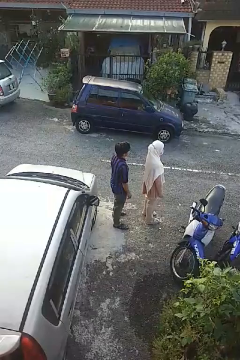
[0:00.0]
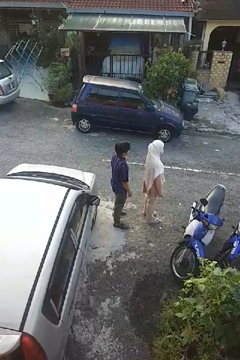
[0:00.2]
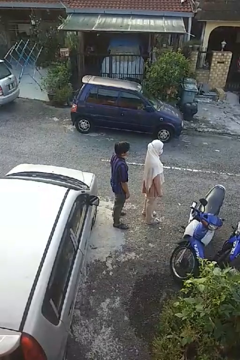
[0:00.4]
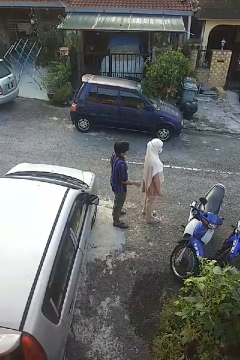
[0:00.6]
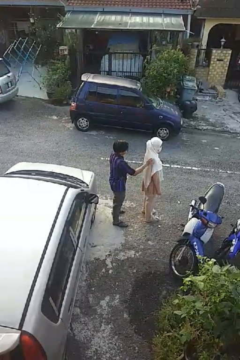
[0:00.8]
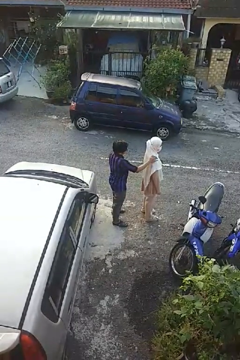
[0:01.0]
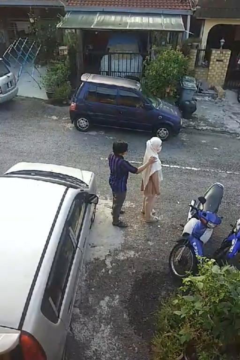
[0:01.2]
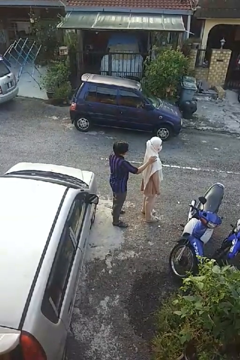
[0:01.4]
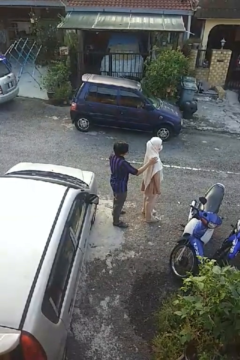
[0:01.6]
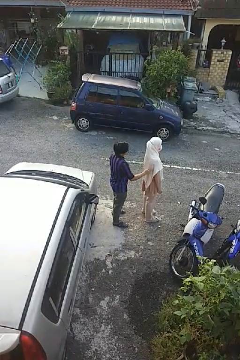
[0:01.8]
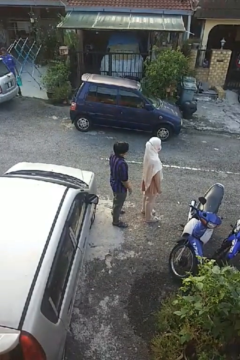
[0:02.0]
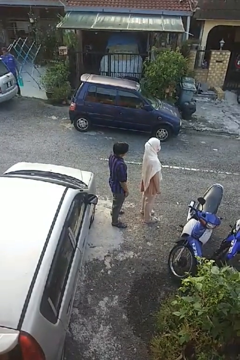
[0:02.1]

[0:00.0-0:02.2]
person touches back of person

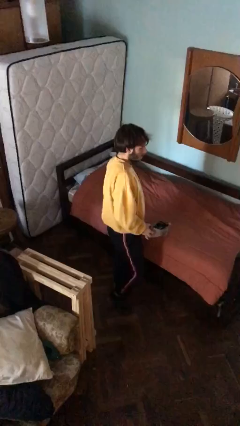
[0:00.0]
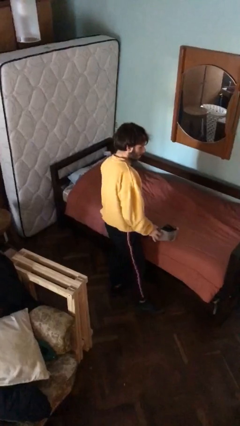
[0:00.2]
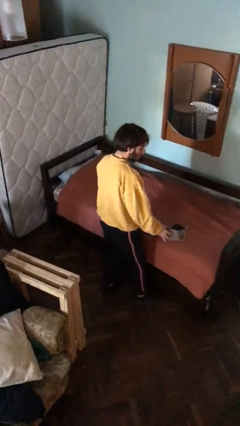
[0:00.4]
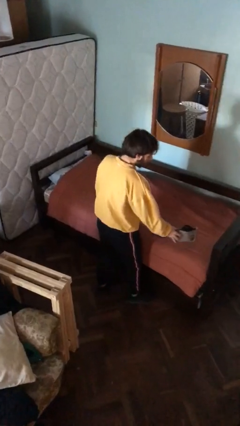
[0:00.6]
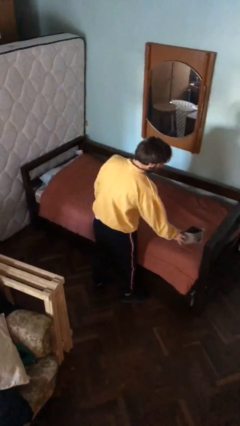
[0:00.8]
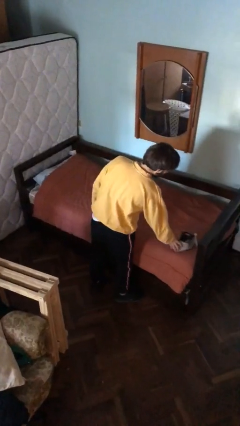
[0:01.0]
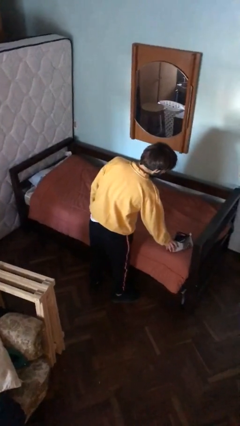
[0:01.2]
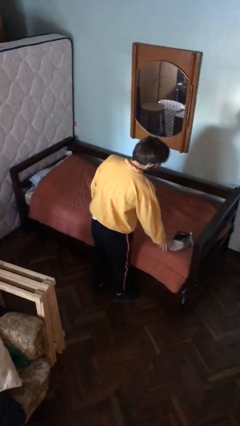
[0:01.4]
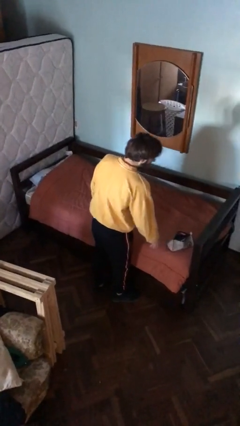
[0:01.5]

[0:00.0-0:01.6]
person puts down object on bed

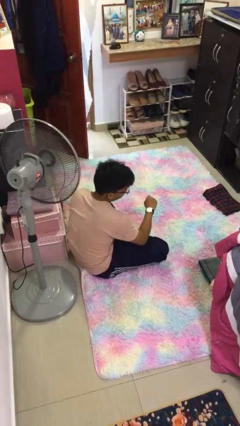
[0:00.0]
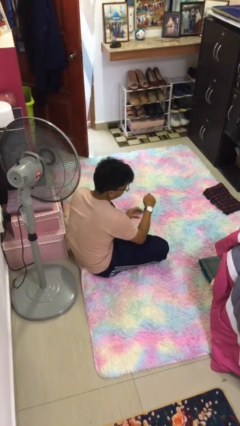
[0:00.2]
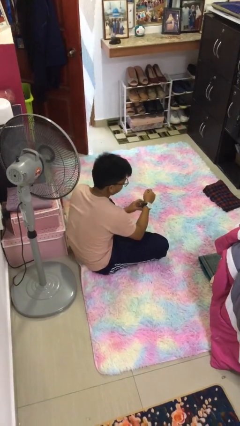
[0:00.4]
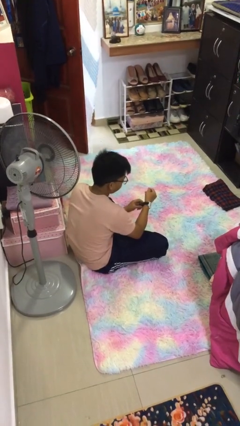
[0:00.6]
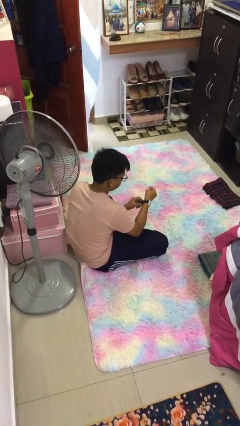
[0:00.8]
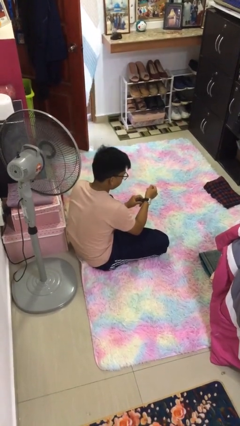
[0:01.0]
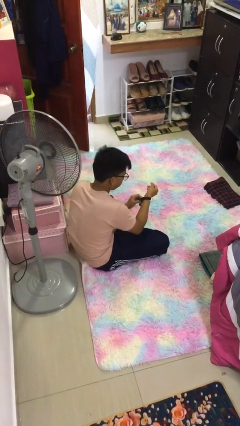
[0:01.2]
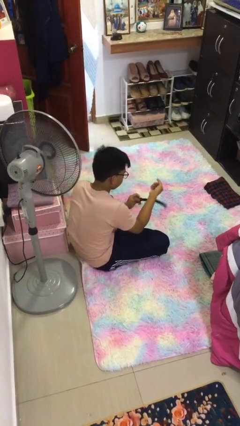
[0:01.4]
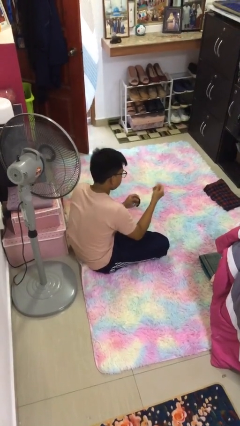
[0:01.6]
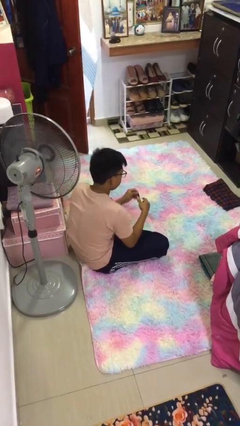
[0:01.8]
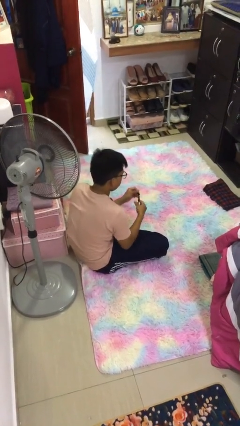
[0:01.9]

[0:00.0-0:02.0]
person takes off wristwatch

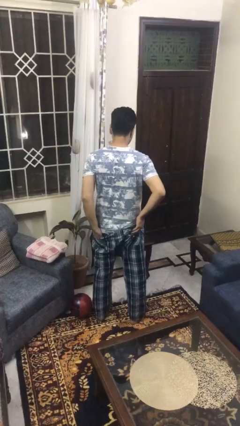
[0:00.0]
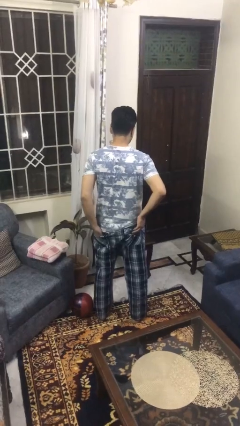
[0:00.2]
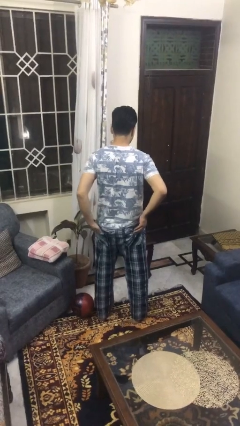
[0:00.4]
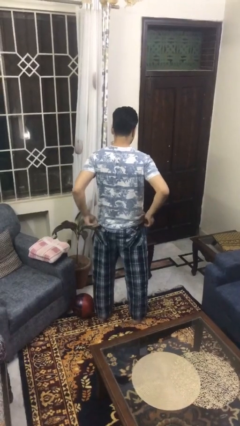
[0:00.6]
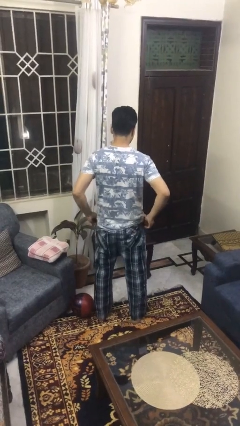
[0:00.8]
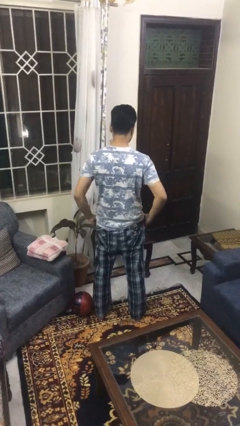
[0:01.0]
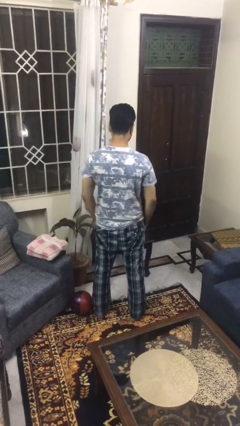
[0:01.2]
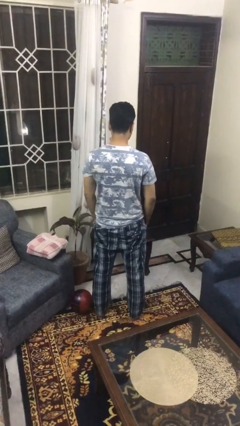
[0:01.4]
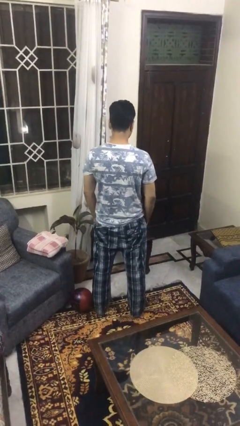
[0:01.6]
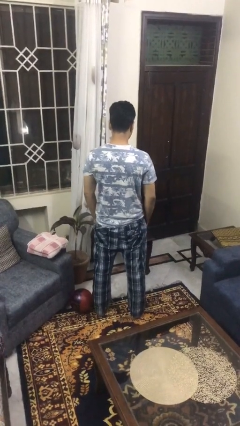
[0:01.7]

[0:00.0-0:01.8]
person puts hands in back pockets

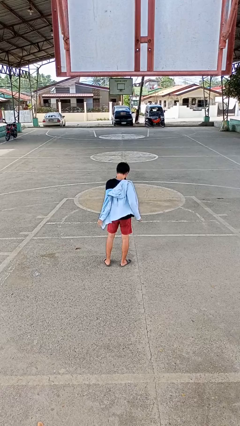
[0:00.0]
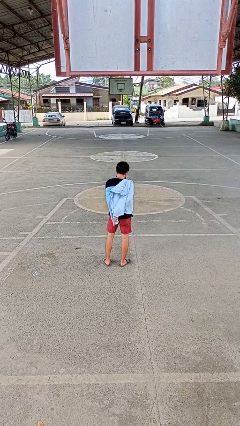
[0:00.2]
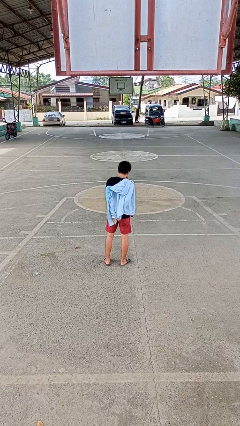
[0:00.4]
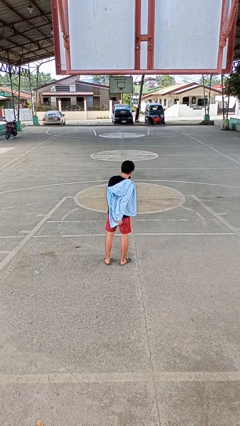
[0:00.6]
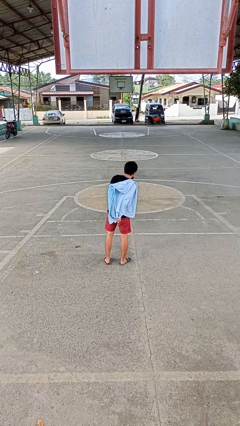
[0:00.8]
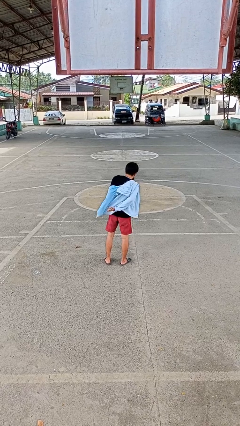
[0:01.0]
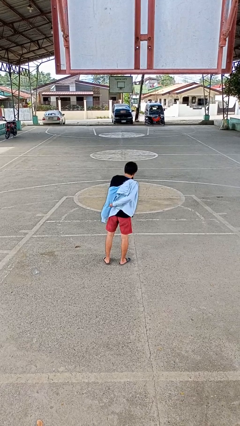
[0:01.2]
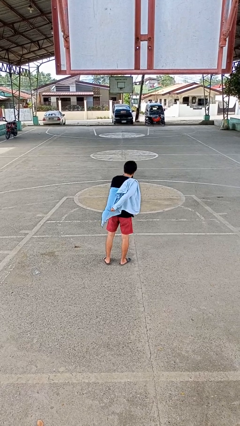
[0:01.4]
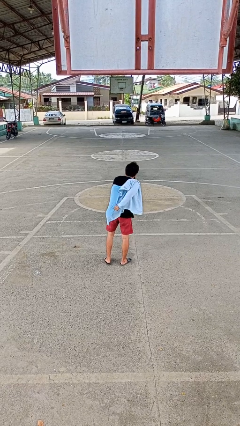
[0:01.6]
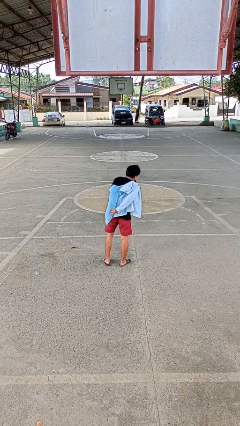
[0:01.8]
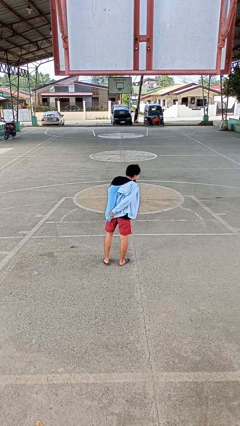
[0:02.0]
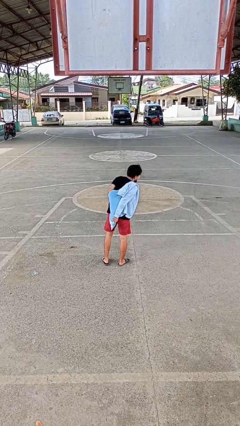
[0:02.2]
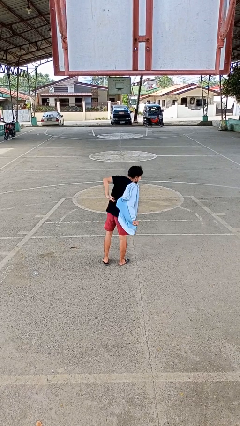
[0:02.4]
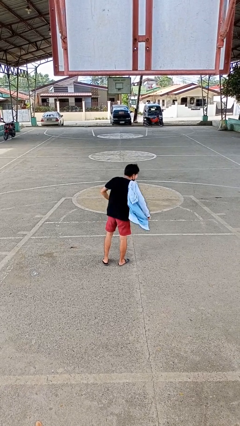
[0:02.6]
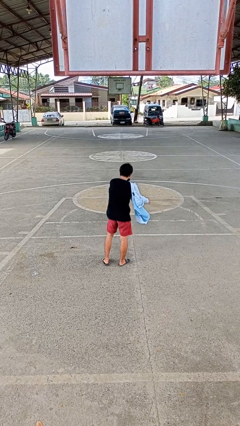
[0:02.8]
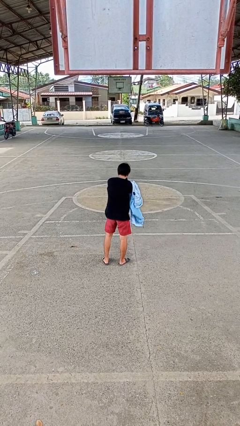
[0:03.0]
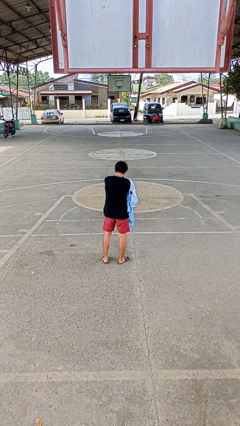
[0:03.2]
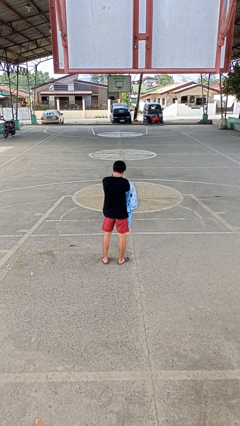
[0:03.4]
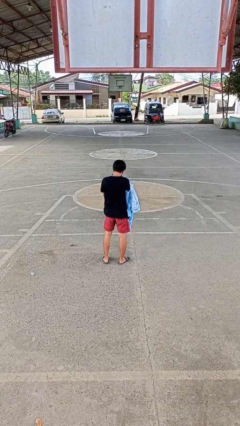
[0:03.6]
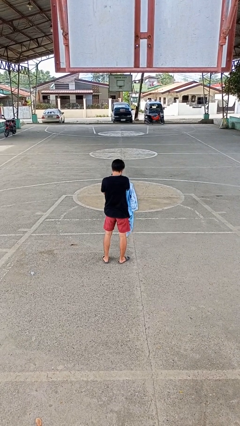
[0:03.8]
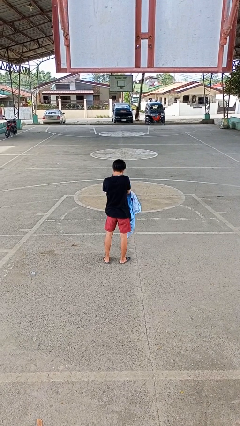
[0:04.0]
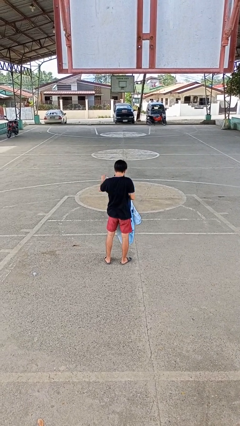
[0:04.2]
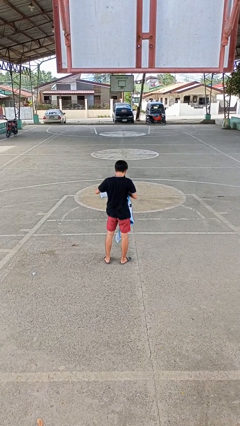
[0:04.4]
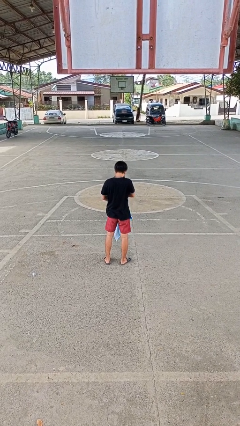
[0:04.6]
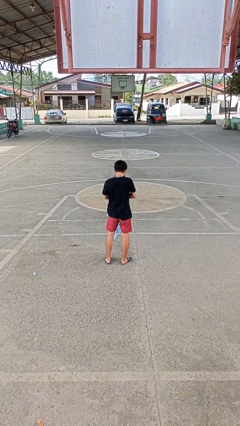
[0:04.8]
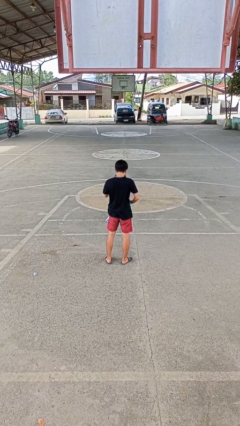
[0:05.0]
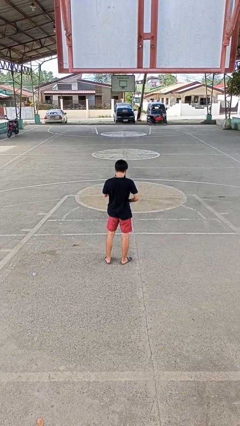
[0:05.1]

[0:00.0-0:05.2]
person takes off jacket

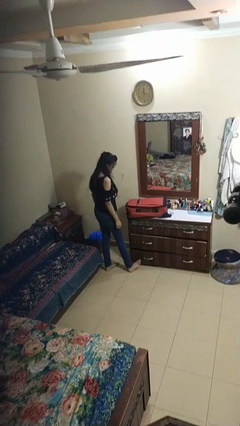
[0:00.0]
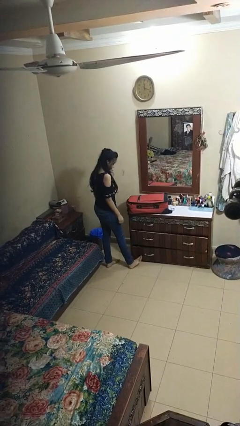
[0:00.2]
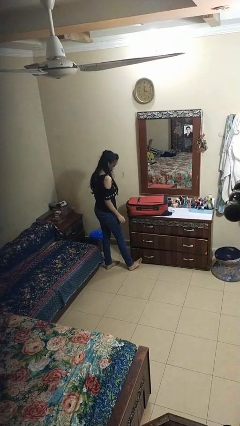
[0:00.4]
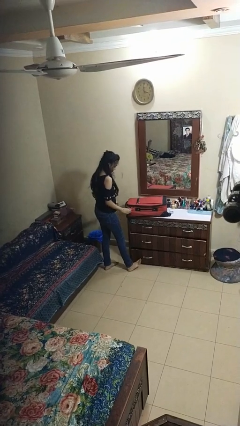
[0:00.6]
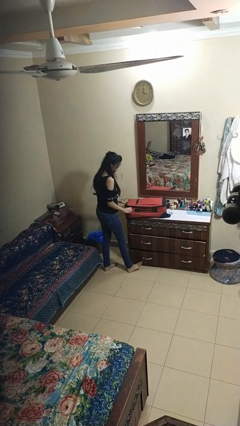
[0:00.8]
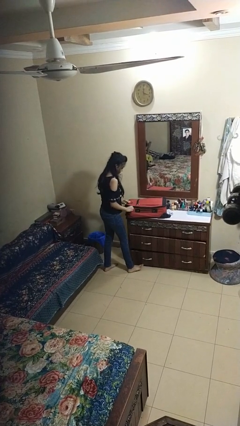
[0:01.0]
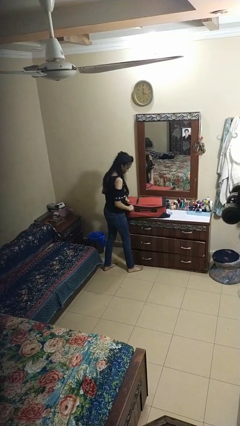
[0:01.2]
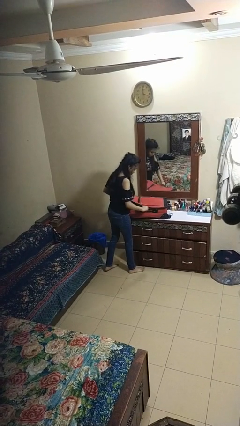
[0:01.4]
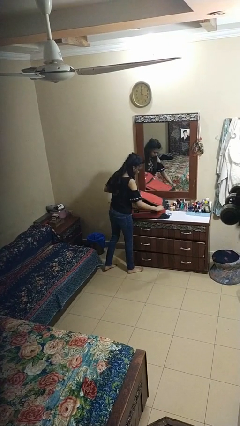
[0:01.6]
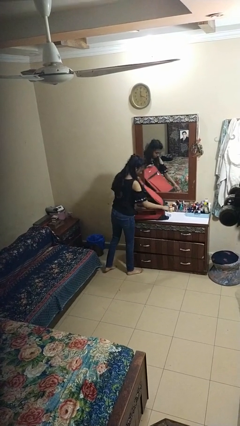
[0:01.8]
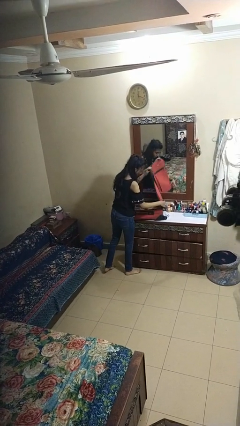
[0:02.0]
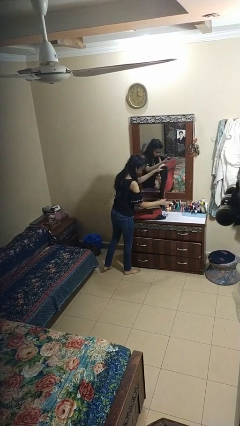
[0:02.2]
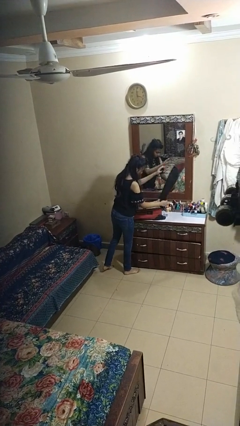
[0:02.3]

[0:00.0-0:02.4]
person opens suitcase

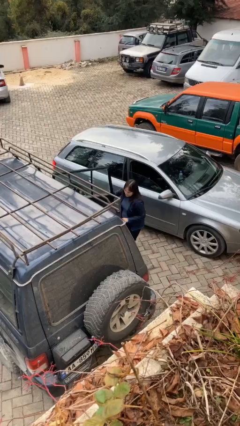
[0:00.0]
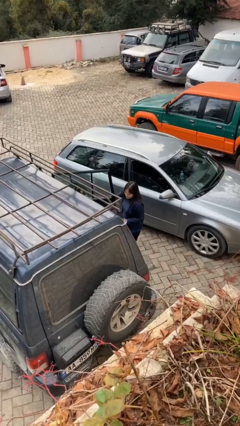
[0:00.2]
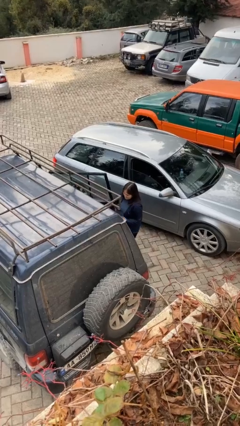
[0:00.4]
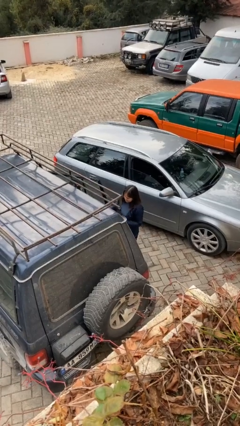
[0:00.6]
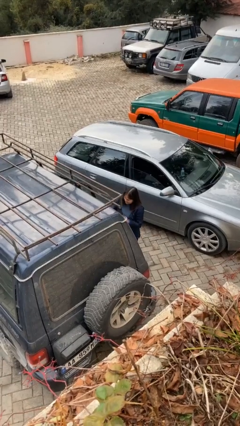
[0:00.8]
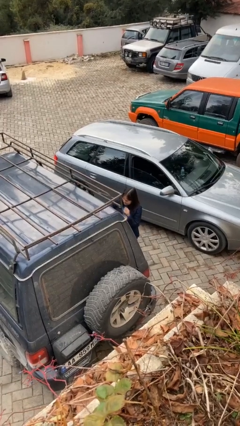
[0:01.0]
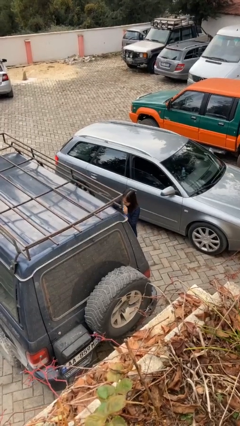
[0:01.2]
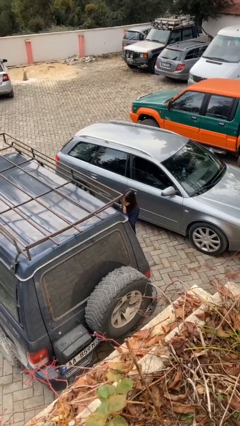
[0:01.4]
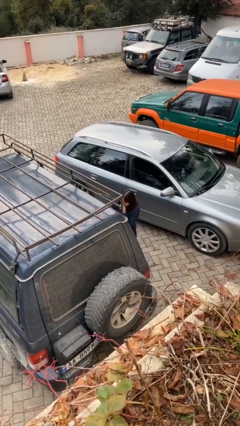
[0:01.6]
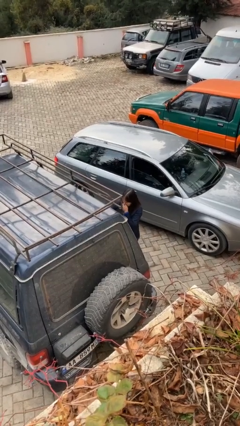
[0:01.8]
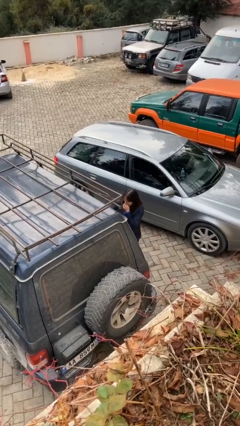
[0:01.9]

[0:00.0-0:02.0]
person closes car door
